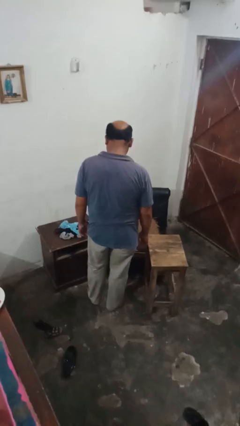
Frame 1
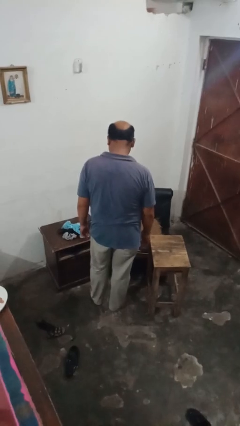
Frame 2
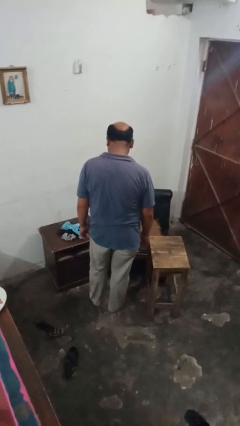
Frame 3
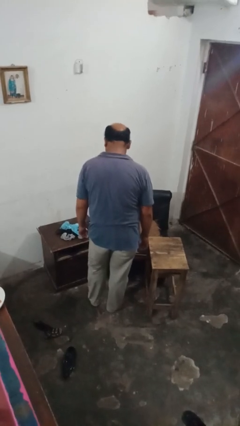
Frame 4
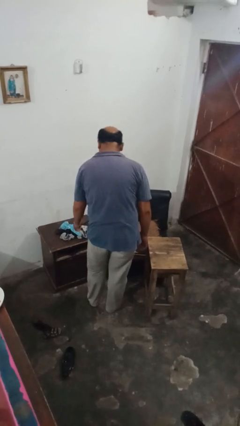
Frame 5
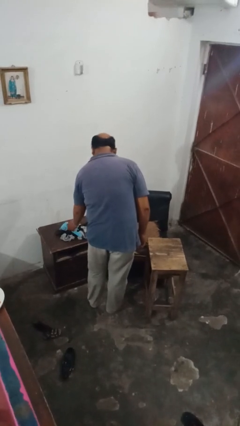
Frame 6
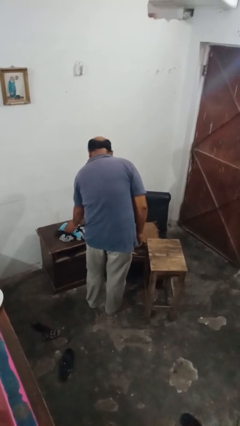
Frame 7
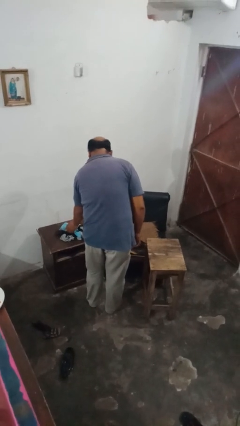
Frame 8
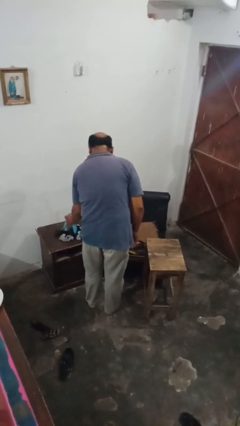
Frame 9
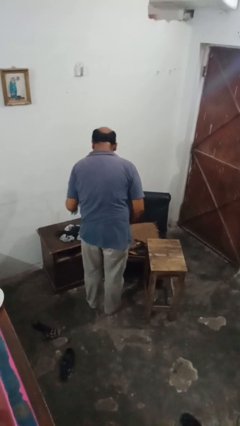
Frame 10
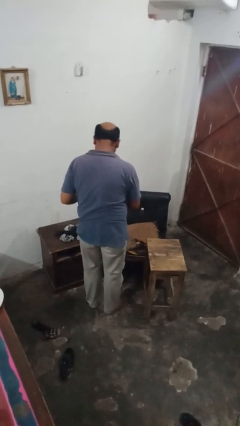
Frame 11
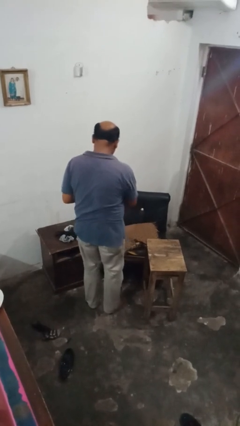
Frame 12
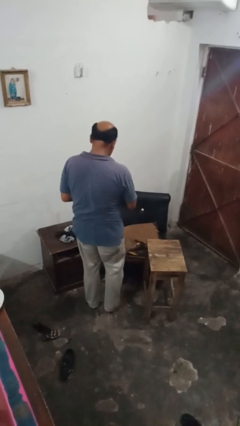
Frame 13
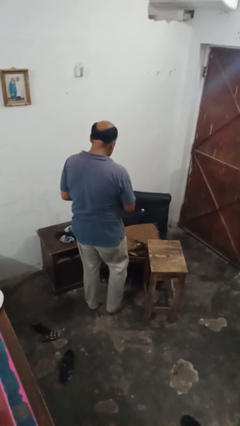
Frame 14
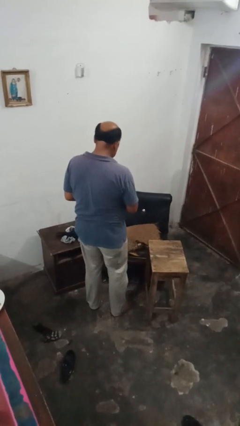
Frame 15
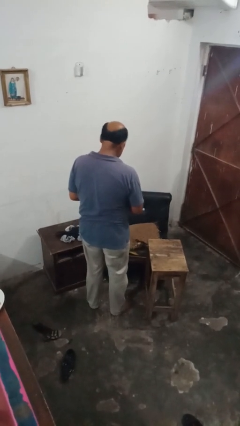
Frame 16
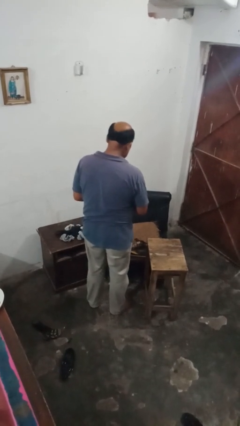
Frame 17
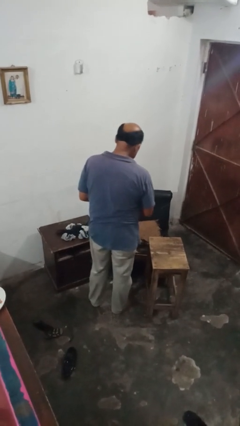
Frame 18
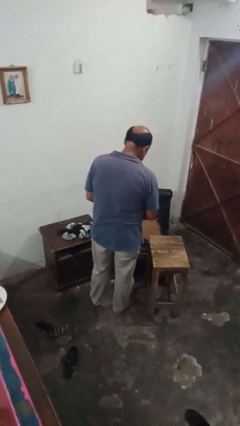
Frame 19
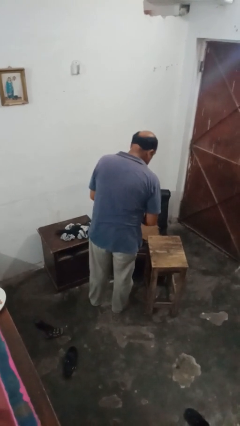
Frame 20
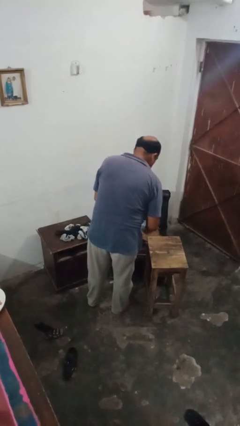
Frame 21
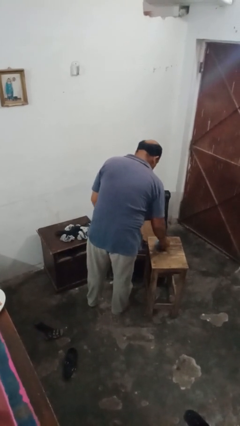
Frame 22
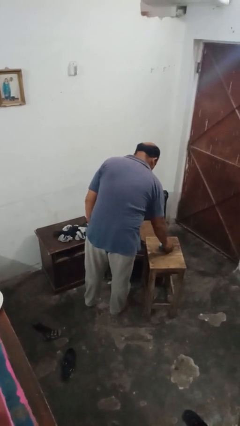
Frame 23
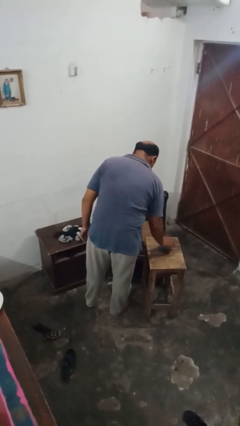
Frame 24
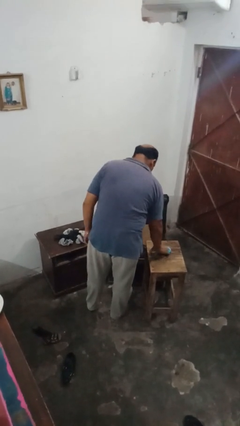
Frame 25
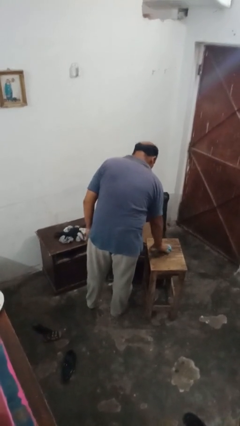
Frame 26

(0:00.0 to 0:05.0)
person folds socks

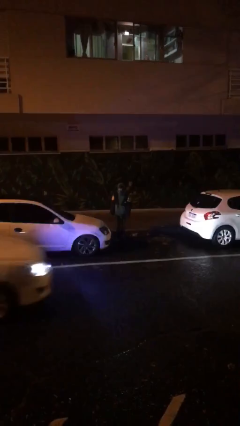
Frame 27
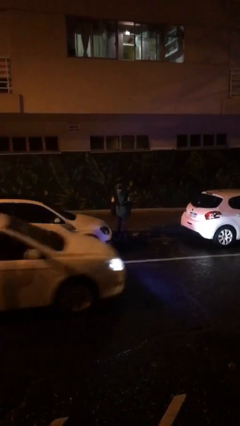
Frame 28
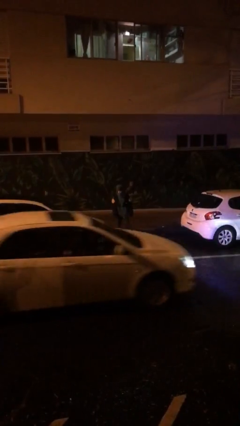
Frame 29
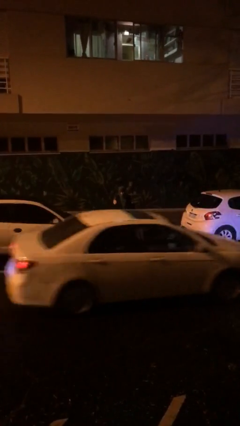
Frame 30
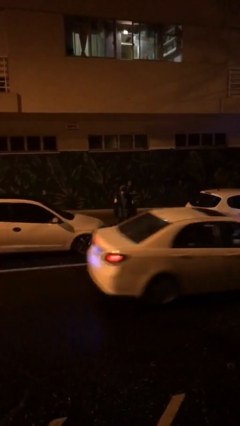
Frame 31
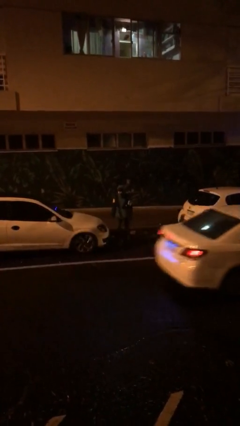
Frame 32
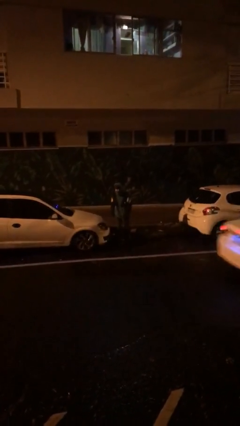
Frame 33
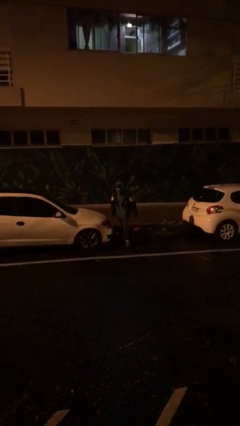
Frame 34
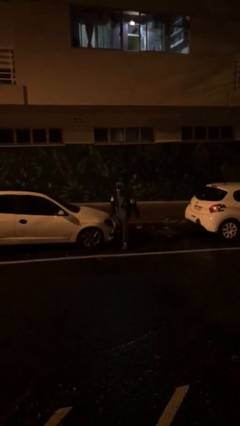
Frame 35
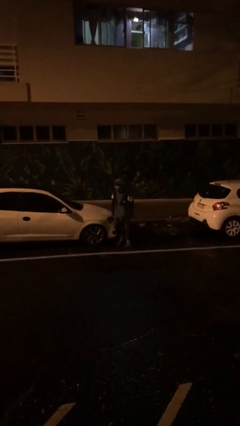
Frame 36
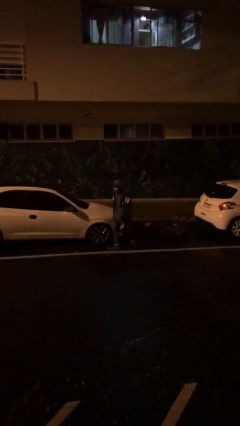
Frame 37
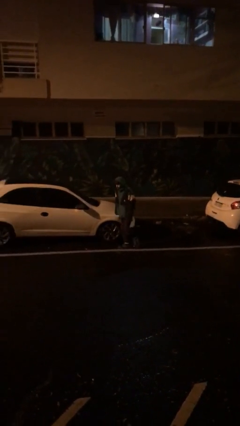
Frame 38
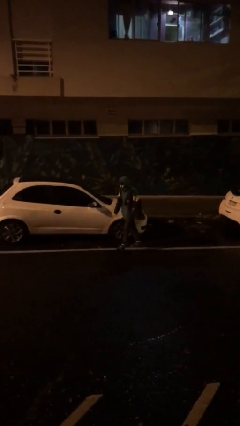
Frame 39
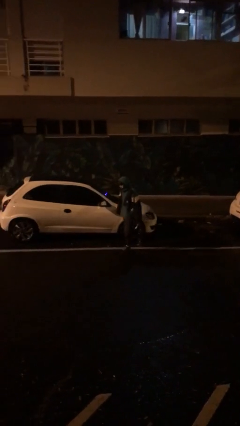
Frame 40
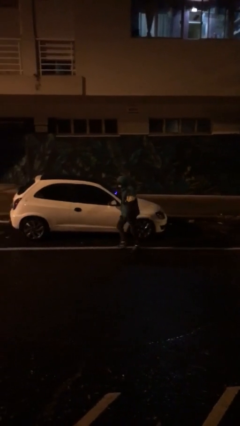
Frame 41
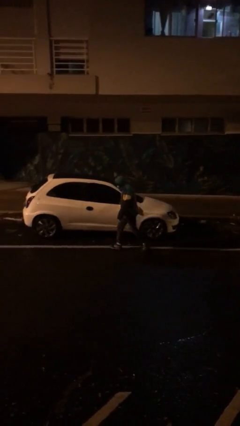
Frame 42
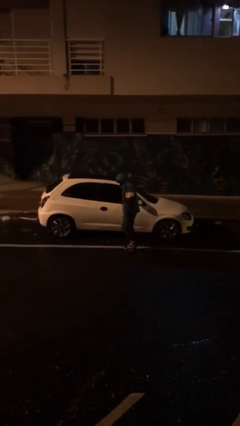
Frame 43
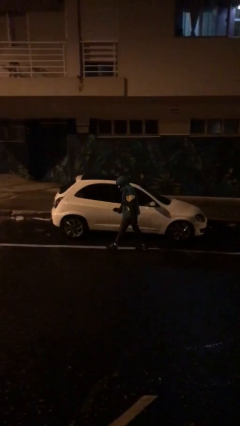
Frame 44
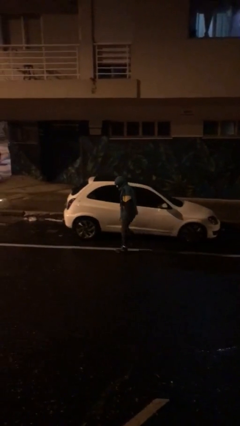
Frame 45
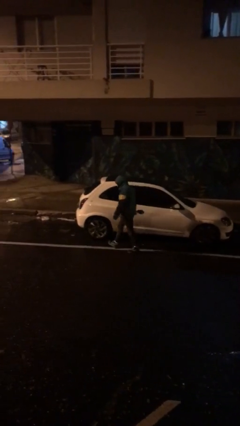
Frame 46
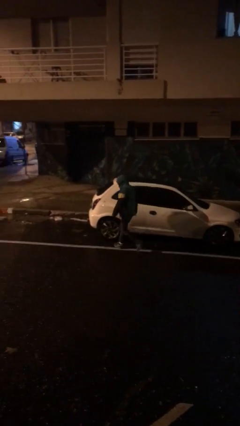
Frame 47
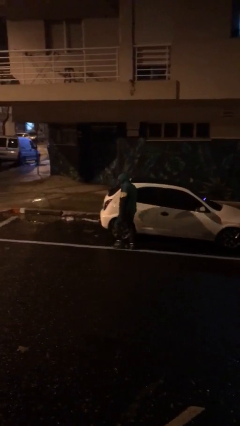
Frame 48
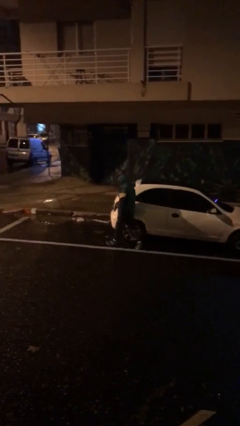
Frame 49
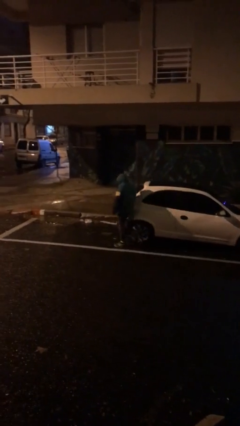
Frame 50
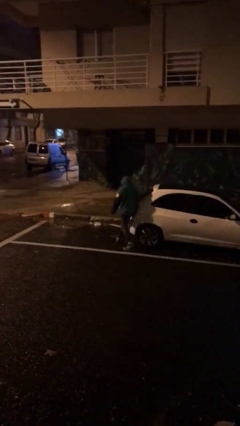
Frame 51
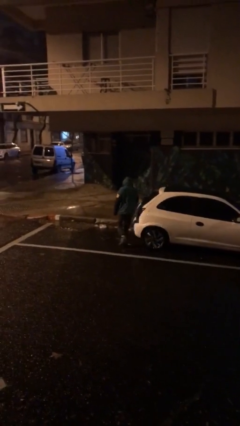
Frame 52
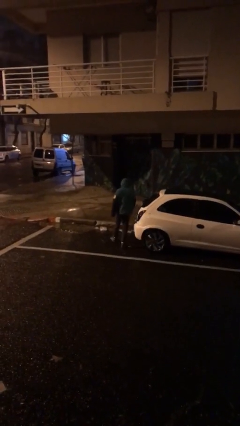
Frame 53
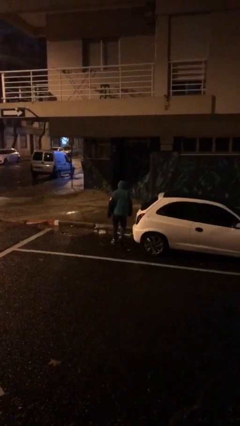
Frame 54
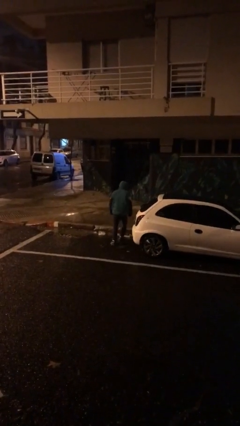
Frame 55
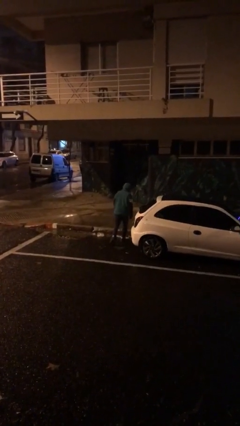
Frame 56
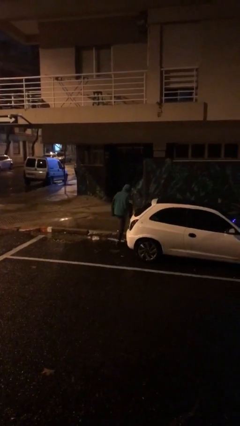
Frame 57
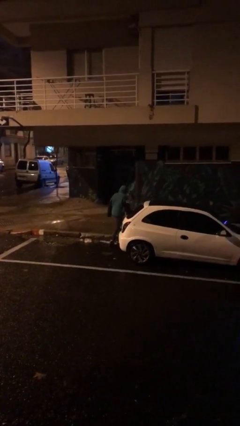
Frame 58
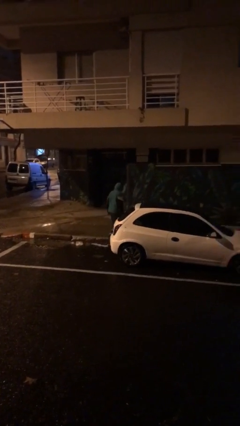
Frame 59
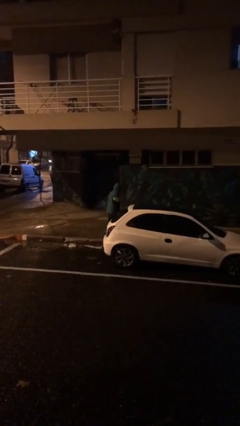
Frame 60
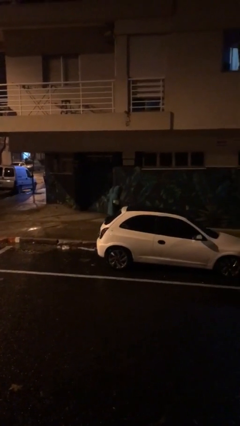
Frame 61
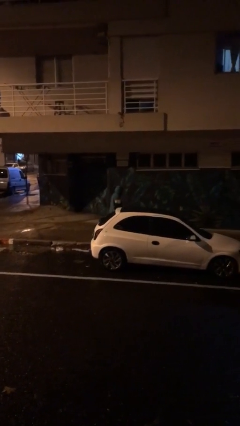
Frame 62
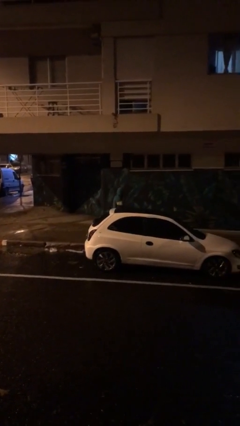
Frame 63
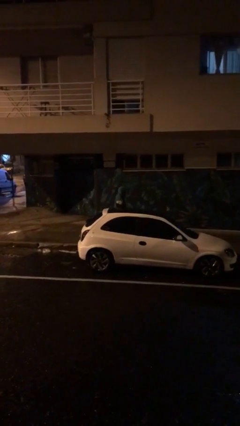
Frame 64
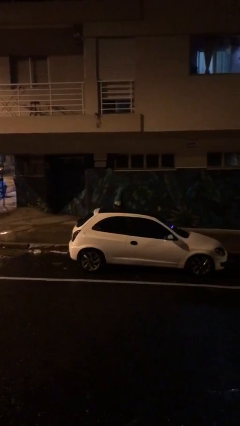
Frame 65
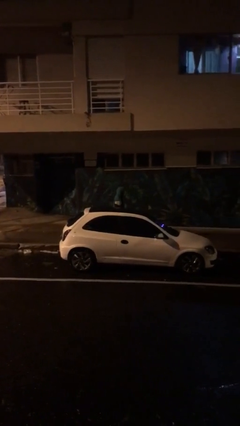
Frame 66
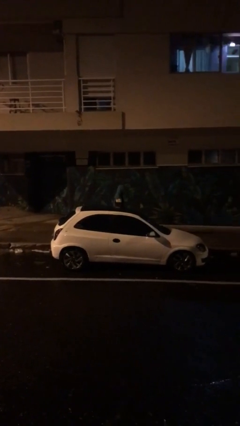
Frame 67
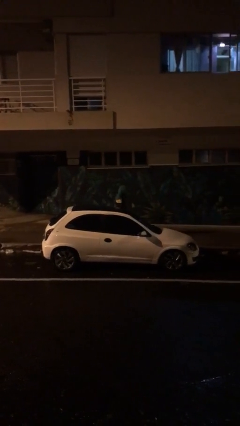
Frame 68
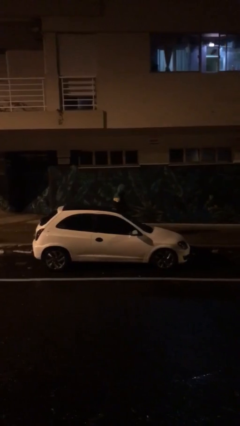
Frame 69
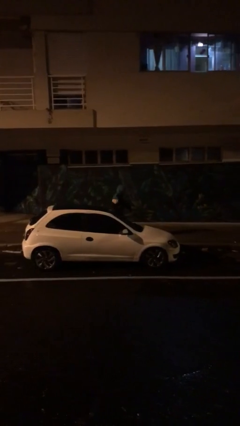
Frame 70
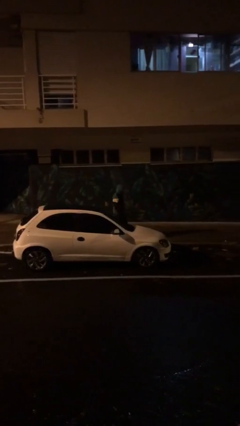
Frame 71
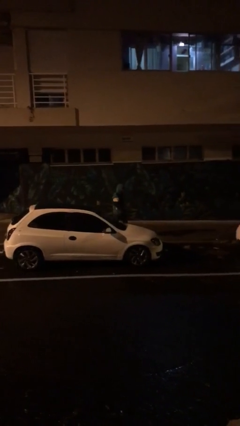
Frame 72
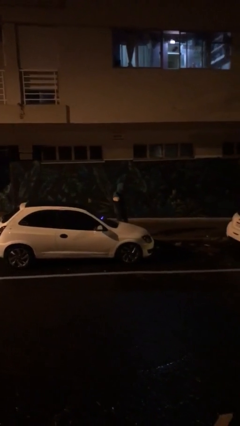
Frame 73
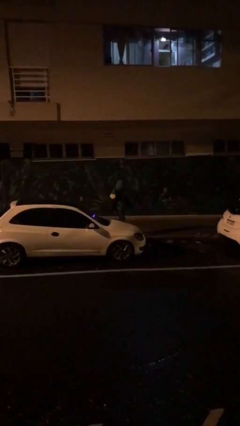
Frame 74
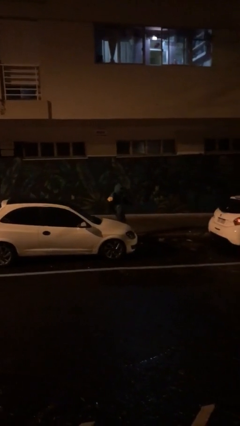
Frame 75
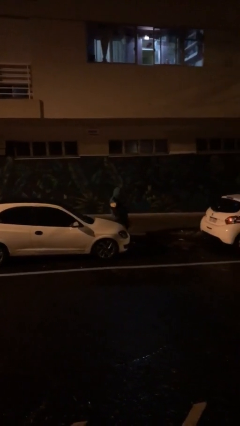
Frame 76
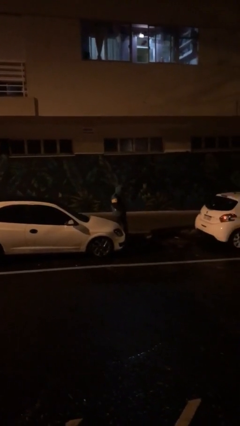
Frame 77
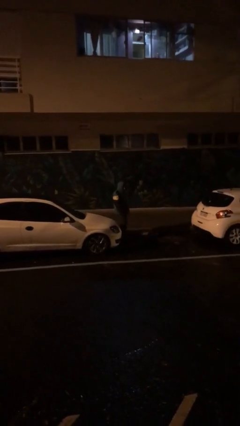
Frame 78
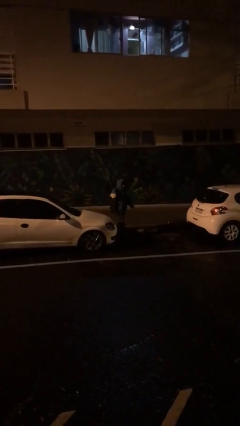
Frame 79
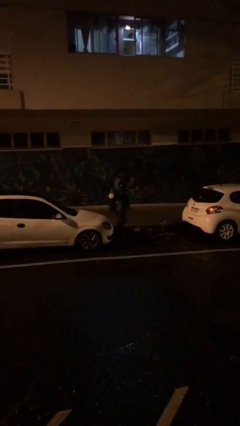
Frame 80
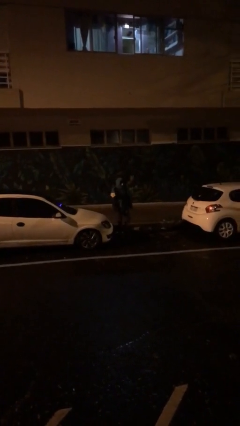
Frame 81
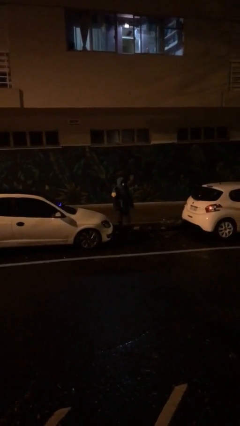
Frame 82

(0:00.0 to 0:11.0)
person walks around car

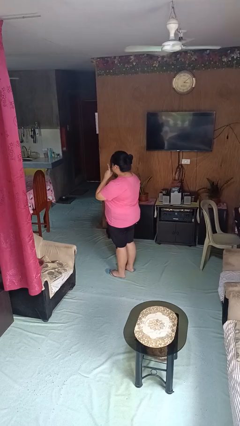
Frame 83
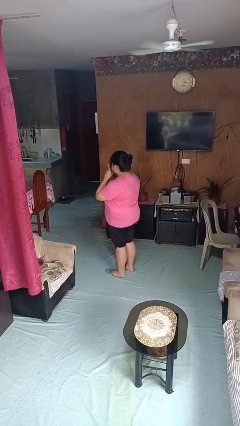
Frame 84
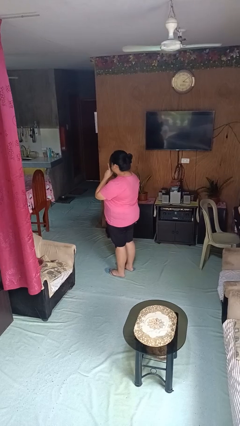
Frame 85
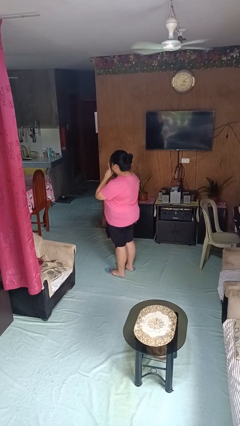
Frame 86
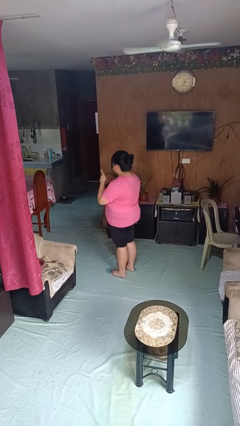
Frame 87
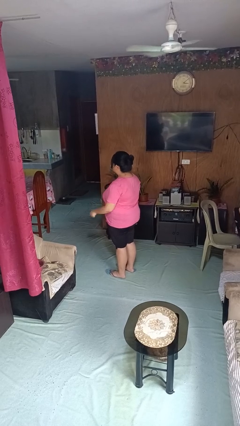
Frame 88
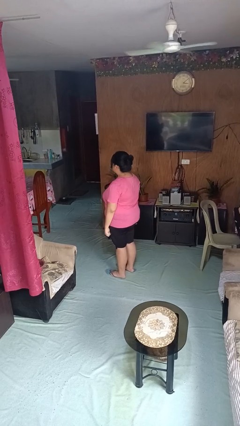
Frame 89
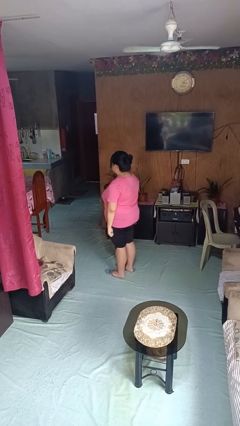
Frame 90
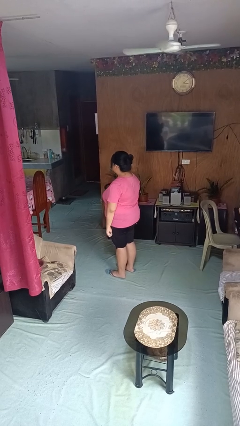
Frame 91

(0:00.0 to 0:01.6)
person gestures be quiet

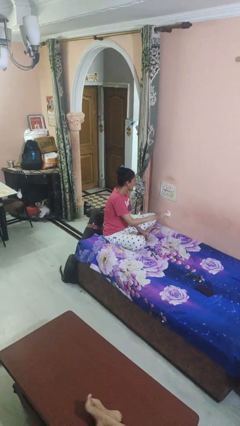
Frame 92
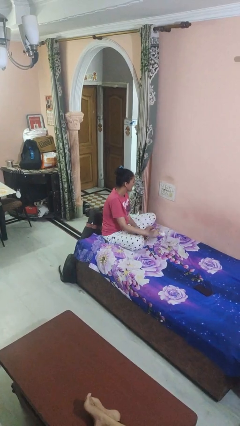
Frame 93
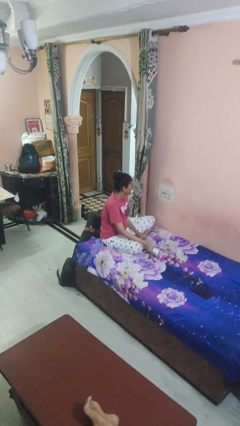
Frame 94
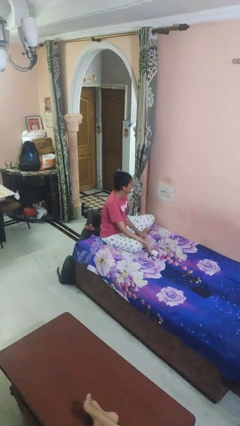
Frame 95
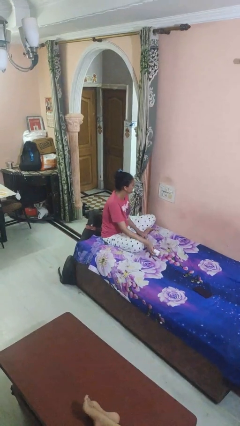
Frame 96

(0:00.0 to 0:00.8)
person unplugs from electrical socket
